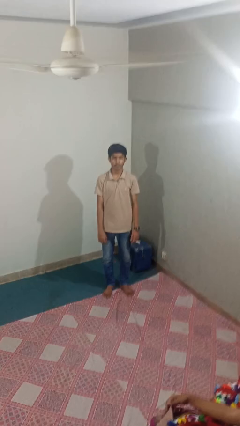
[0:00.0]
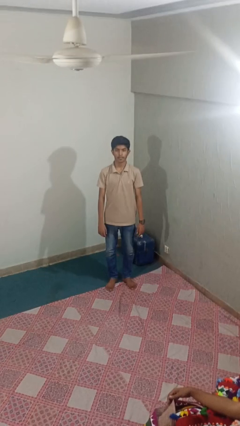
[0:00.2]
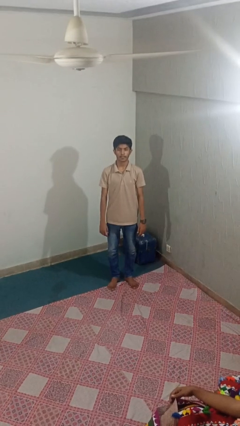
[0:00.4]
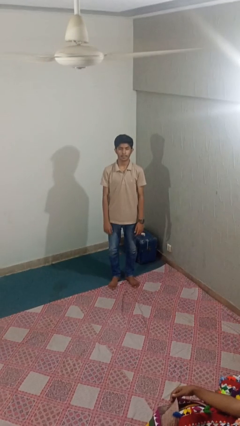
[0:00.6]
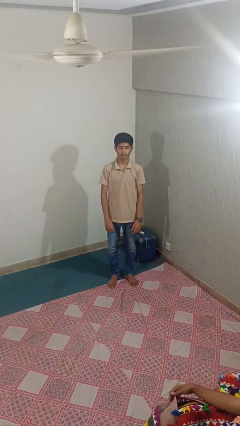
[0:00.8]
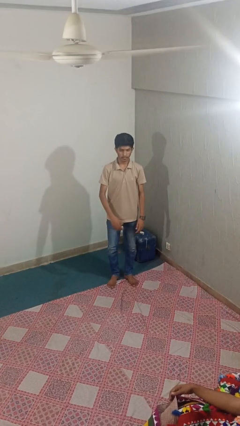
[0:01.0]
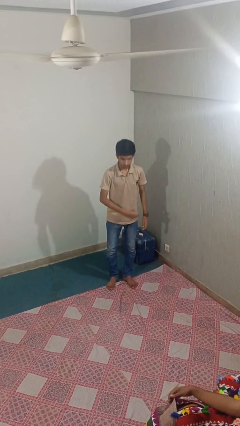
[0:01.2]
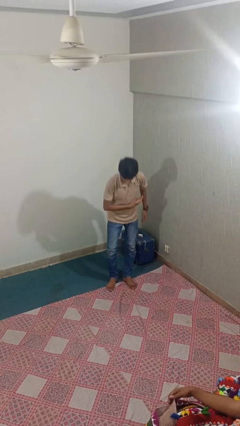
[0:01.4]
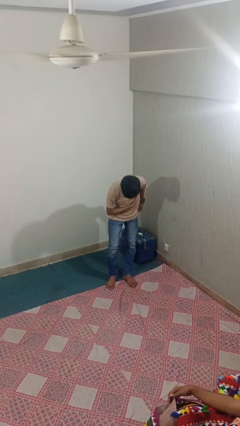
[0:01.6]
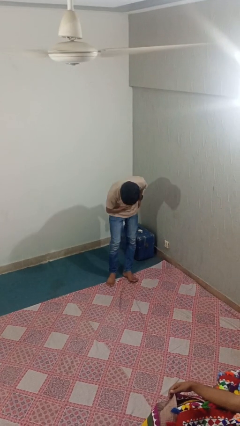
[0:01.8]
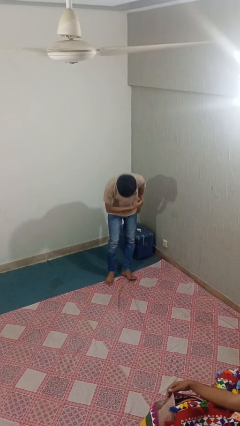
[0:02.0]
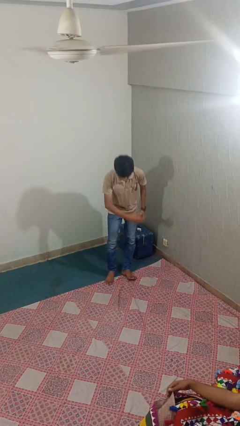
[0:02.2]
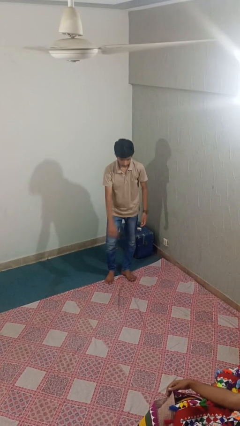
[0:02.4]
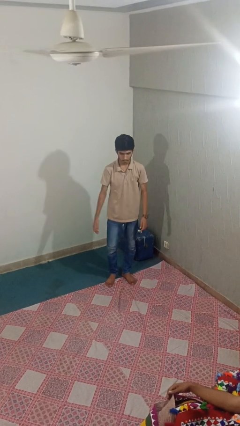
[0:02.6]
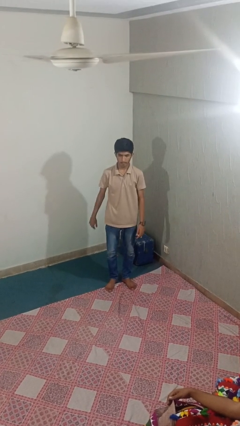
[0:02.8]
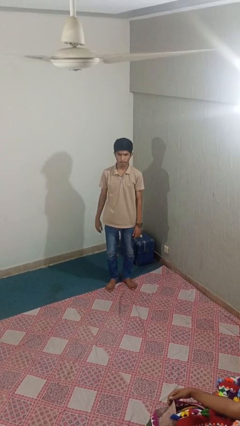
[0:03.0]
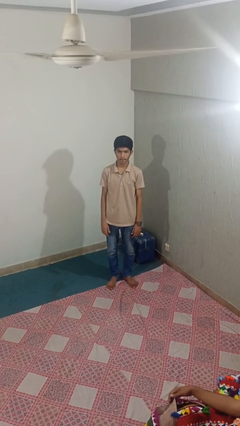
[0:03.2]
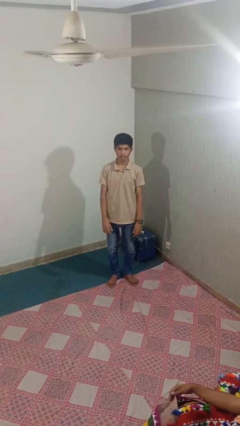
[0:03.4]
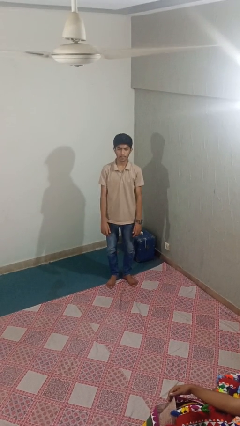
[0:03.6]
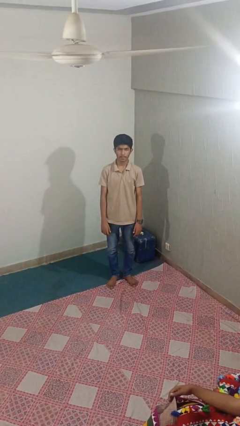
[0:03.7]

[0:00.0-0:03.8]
person bows

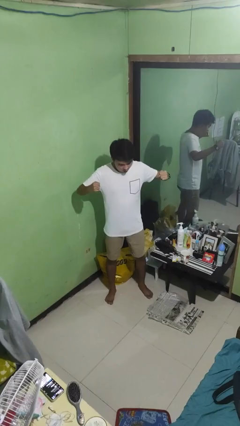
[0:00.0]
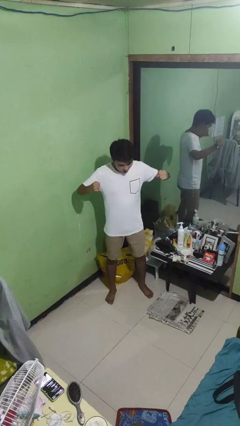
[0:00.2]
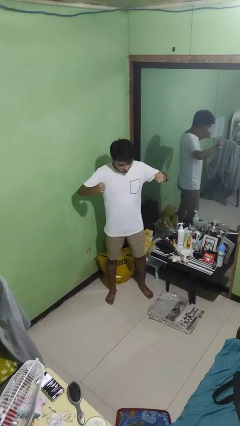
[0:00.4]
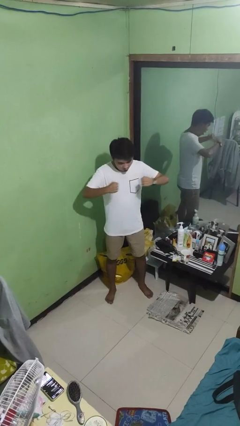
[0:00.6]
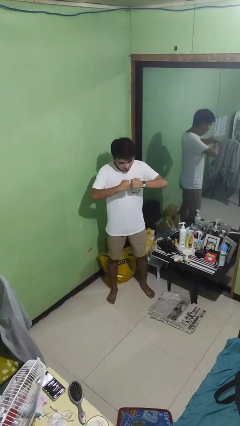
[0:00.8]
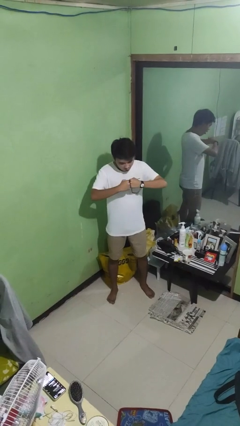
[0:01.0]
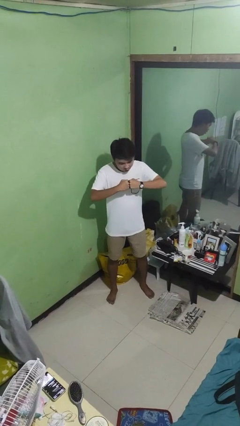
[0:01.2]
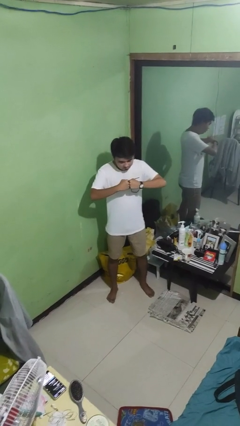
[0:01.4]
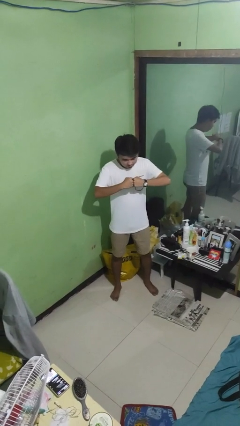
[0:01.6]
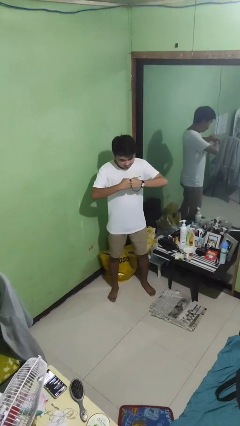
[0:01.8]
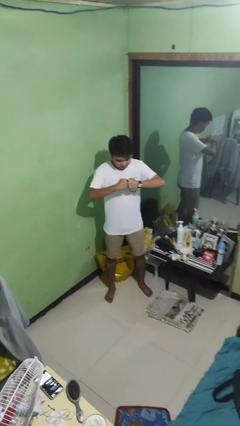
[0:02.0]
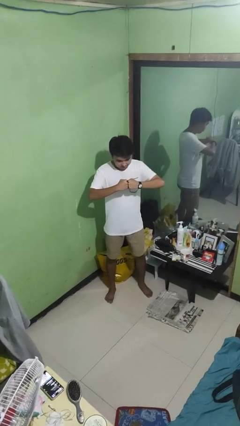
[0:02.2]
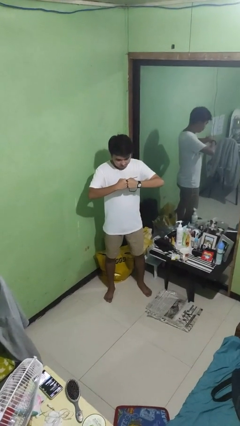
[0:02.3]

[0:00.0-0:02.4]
person gestures zoom out

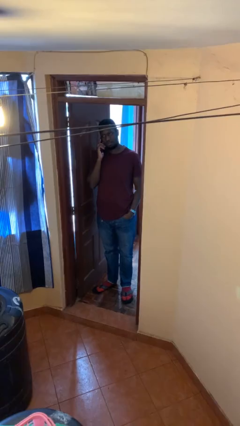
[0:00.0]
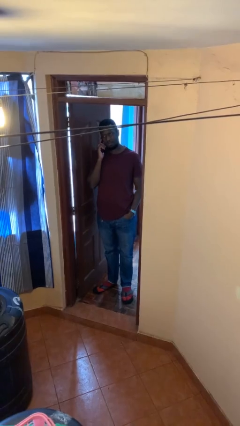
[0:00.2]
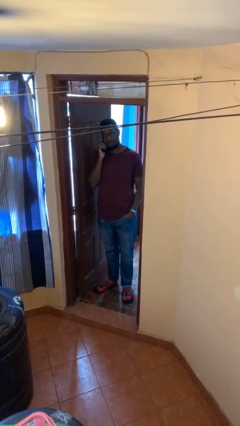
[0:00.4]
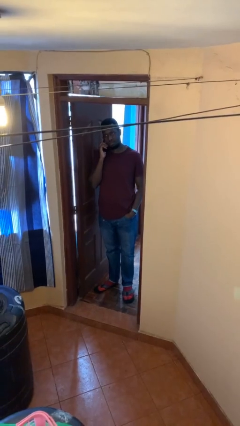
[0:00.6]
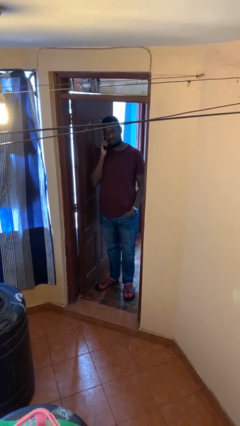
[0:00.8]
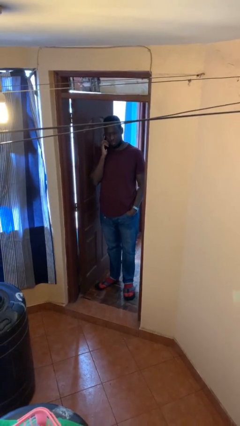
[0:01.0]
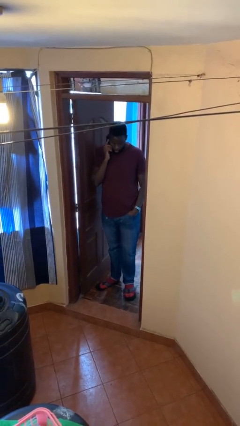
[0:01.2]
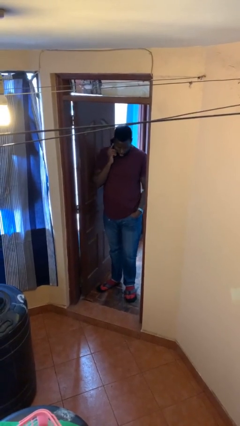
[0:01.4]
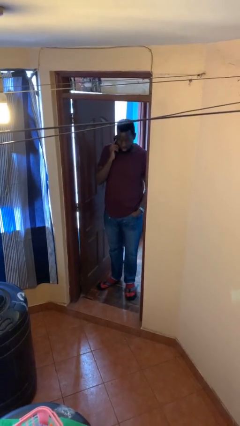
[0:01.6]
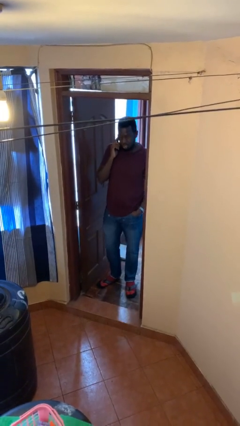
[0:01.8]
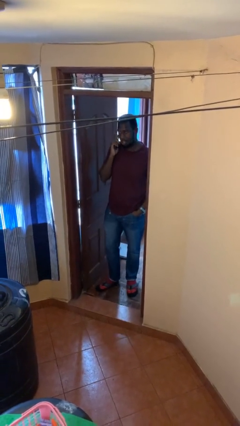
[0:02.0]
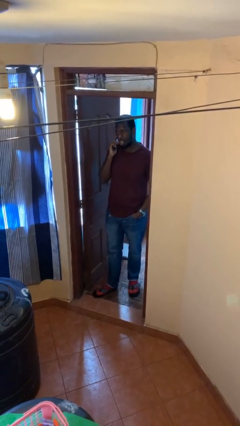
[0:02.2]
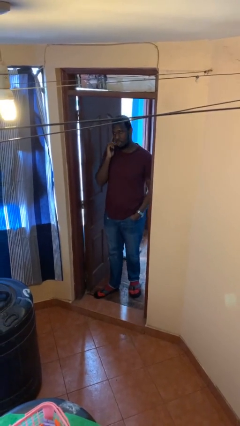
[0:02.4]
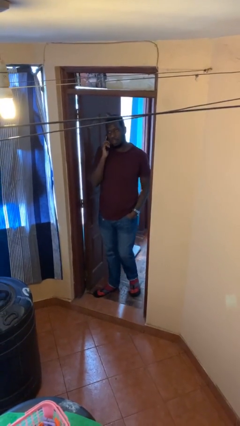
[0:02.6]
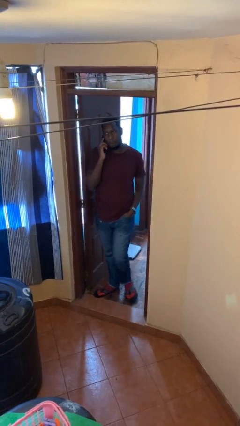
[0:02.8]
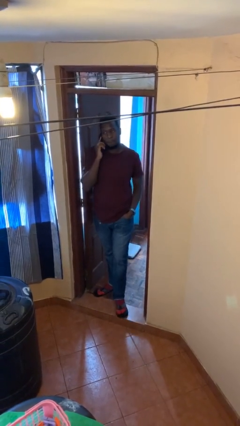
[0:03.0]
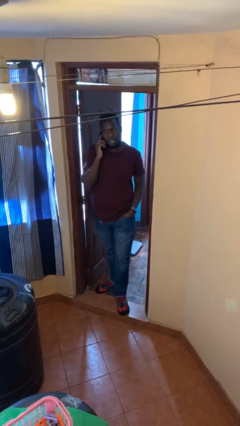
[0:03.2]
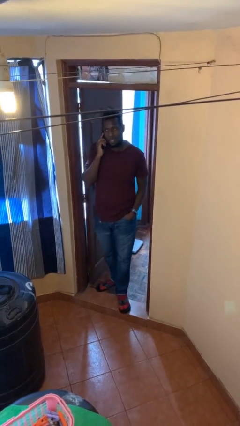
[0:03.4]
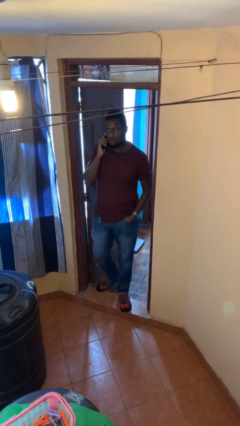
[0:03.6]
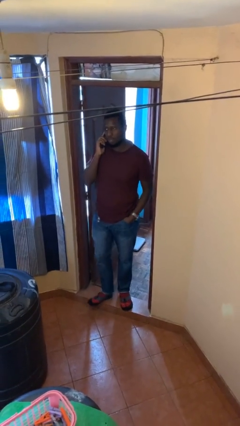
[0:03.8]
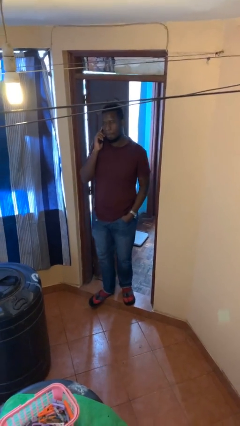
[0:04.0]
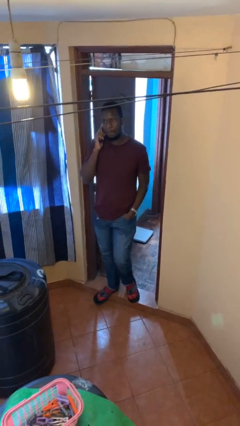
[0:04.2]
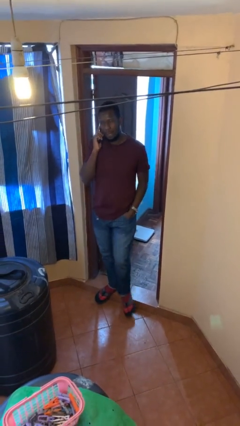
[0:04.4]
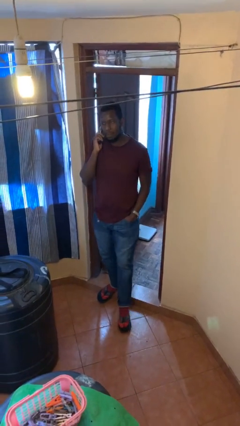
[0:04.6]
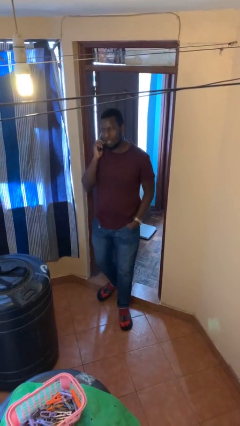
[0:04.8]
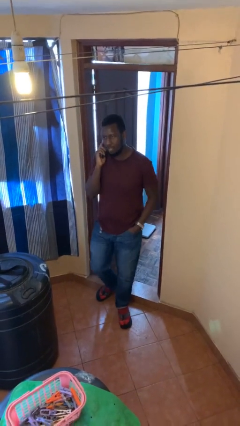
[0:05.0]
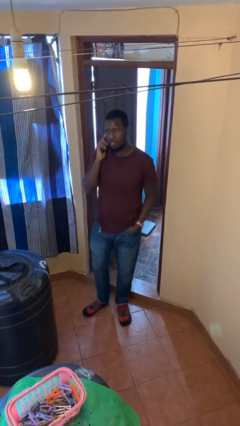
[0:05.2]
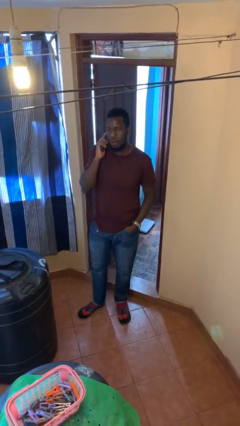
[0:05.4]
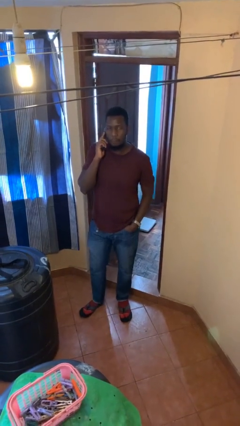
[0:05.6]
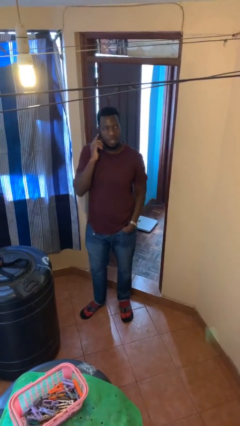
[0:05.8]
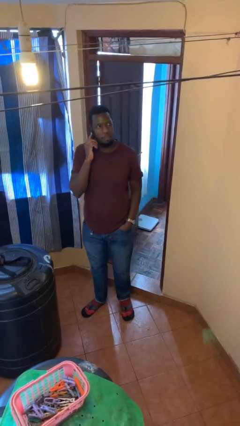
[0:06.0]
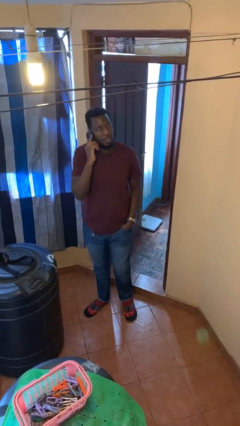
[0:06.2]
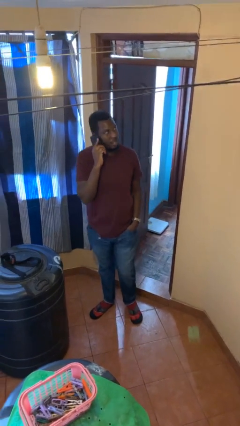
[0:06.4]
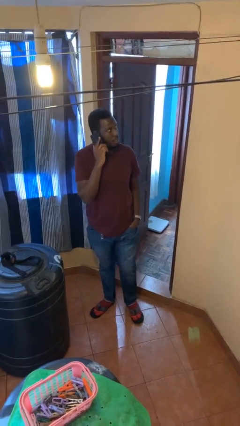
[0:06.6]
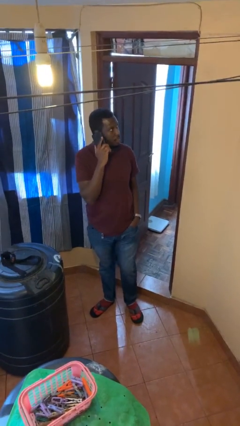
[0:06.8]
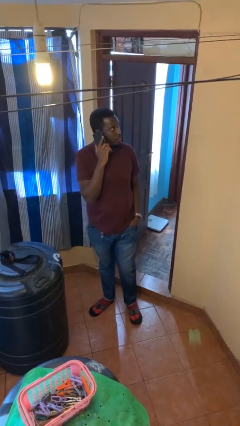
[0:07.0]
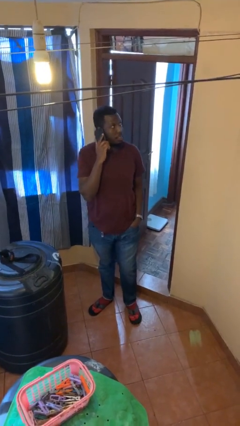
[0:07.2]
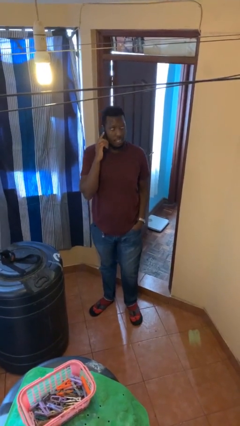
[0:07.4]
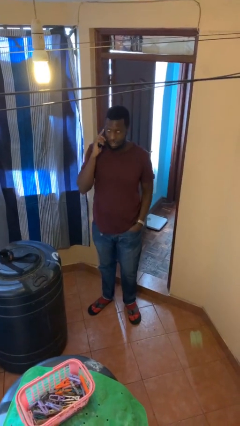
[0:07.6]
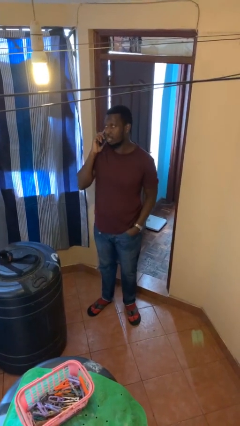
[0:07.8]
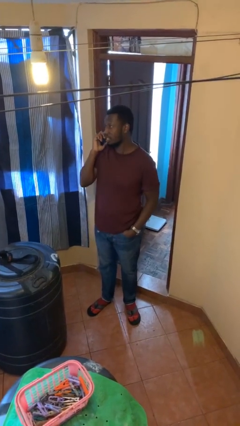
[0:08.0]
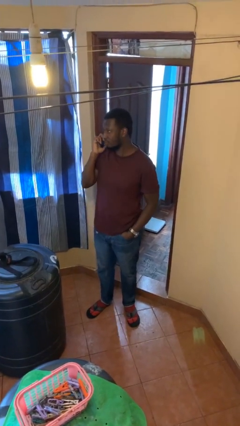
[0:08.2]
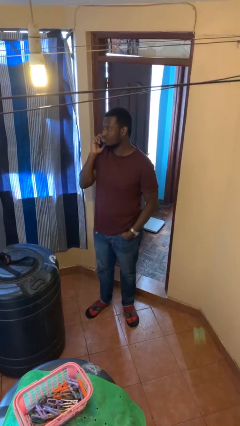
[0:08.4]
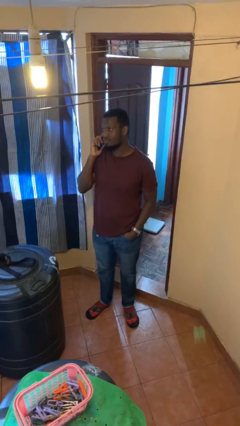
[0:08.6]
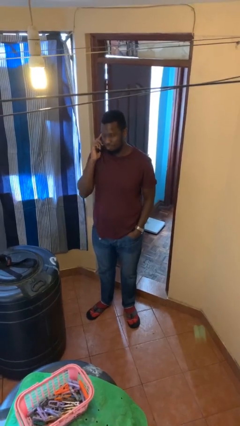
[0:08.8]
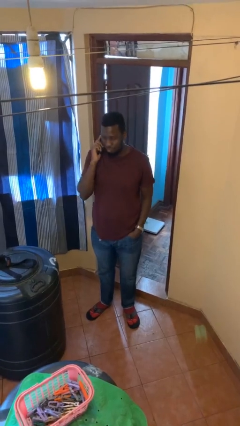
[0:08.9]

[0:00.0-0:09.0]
person enters scene through structure

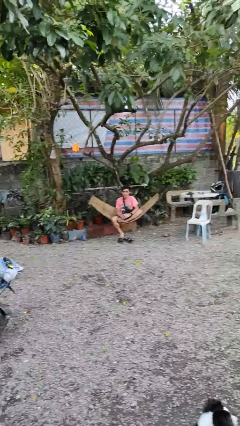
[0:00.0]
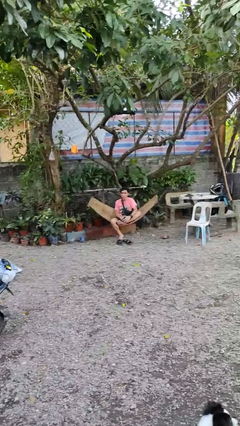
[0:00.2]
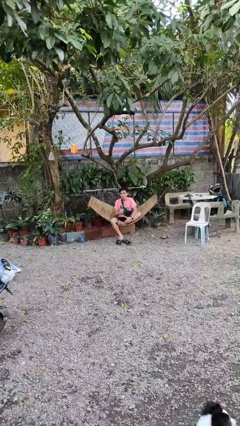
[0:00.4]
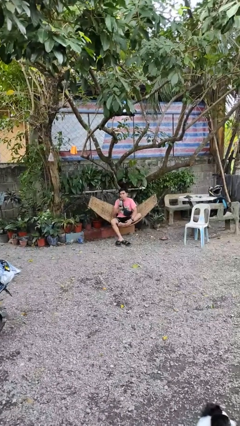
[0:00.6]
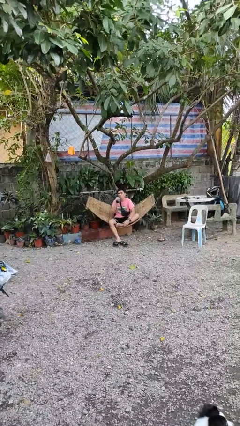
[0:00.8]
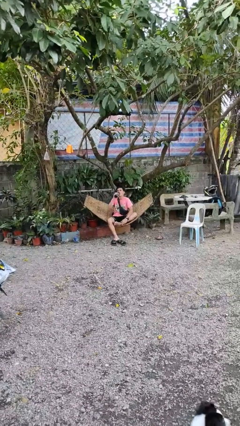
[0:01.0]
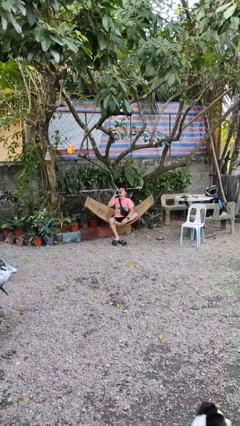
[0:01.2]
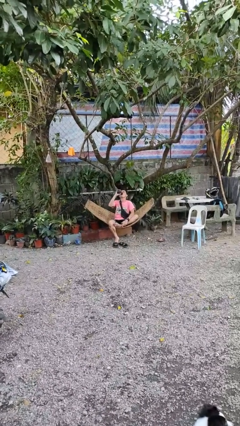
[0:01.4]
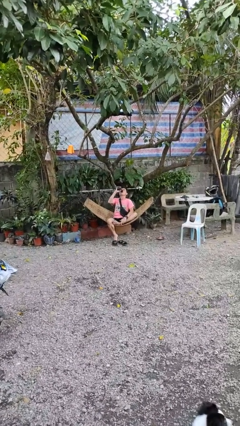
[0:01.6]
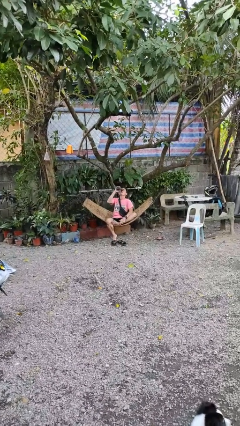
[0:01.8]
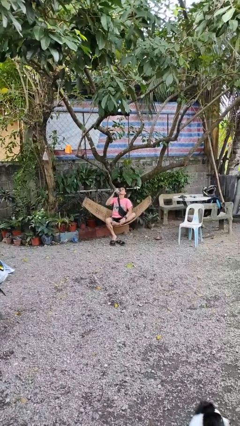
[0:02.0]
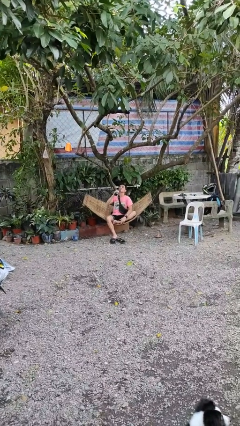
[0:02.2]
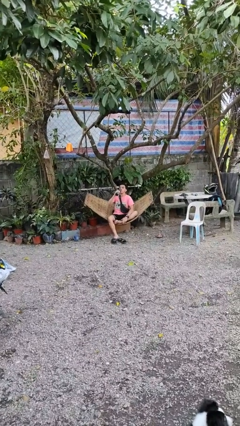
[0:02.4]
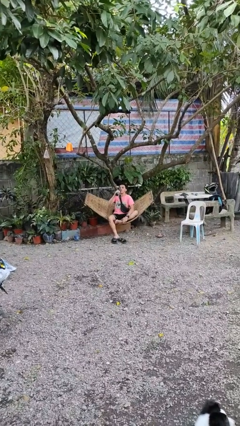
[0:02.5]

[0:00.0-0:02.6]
person drinks from bottle
